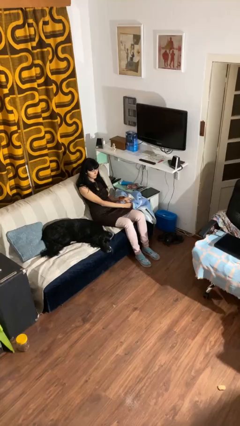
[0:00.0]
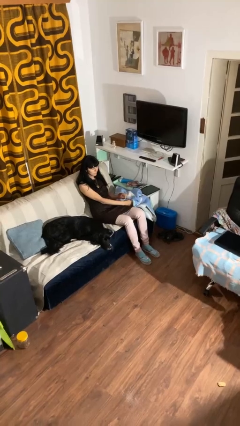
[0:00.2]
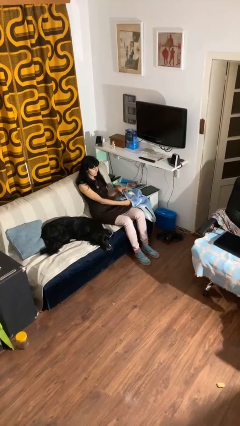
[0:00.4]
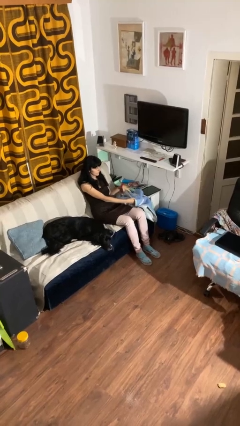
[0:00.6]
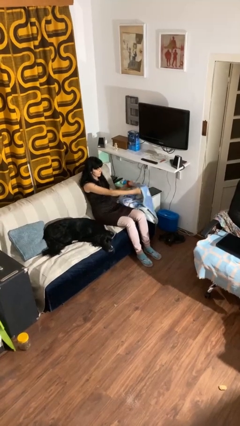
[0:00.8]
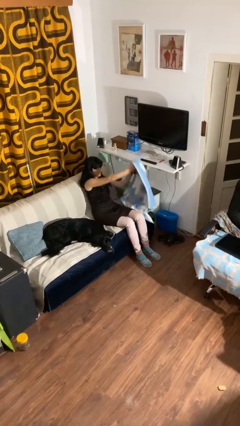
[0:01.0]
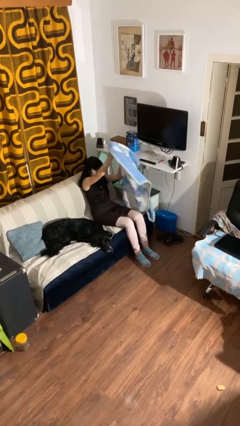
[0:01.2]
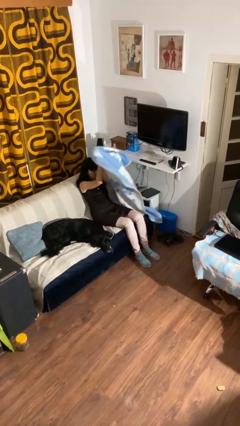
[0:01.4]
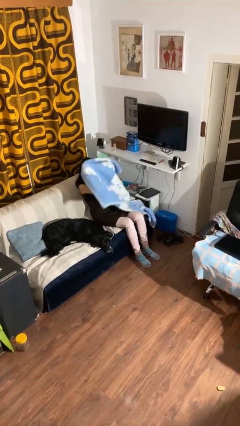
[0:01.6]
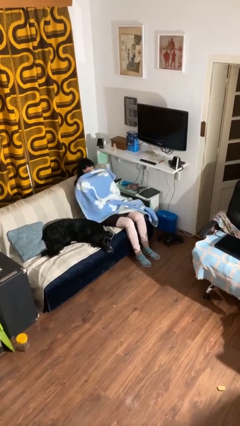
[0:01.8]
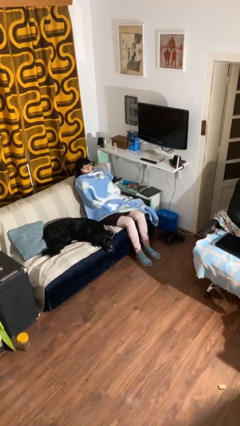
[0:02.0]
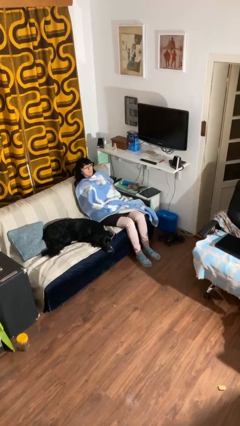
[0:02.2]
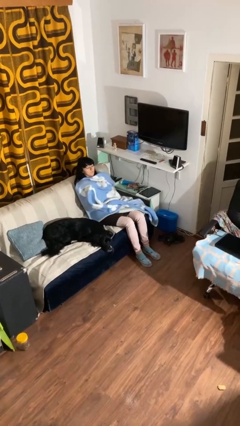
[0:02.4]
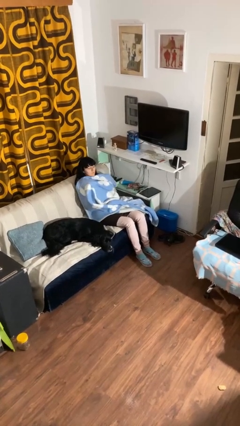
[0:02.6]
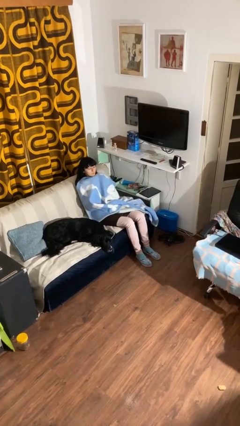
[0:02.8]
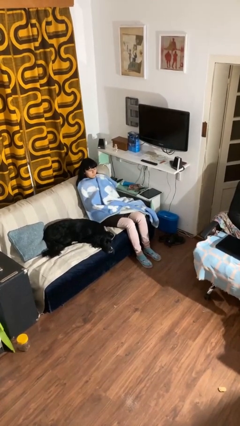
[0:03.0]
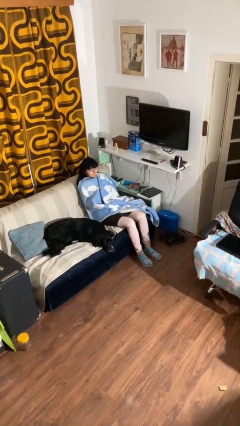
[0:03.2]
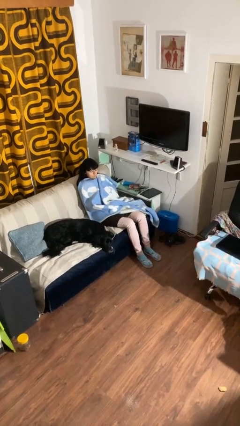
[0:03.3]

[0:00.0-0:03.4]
person covers with blanket

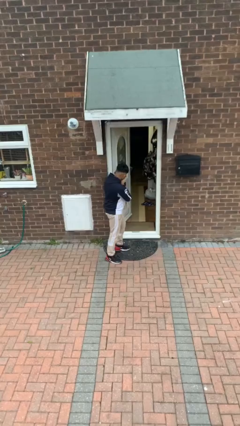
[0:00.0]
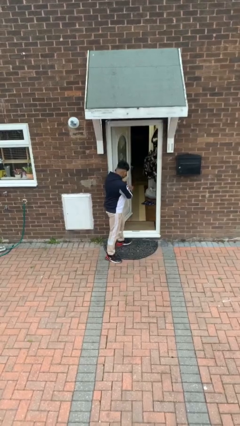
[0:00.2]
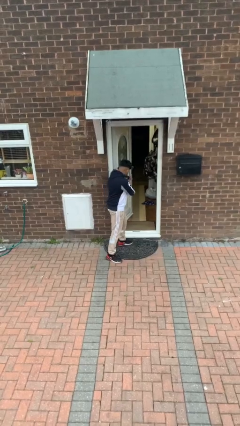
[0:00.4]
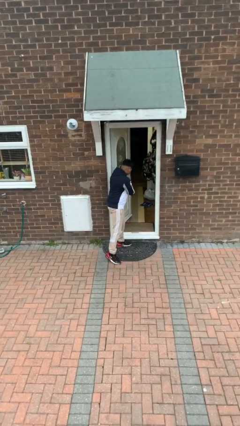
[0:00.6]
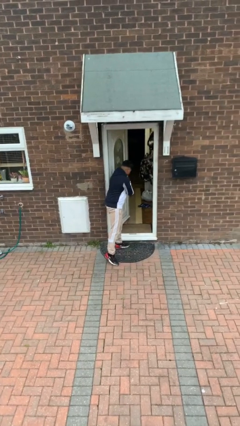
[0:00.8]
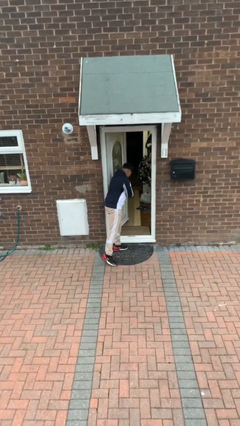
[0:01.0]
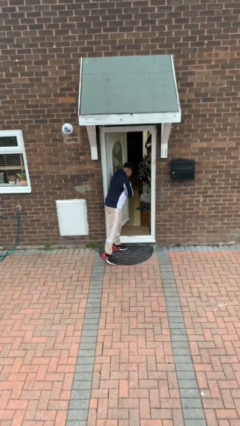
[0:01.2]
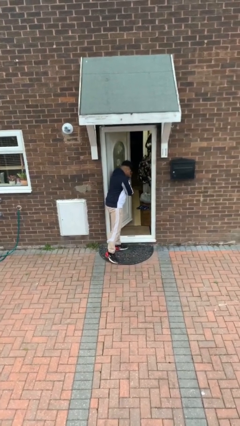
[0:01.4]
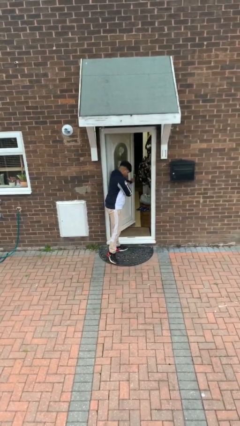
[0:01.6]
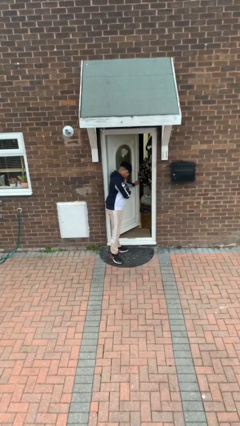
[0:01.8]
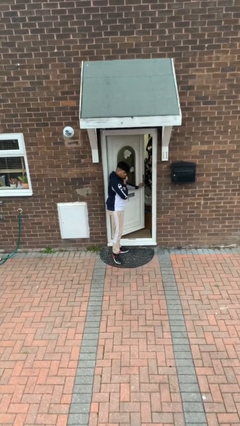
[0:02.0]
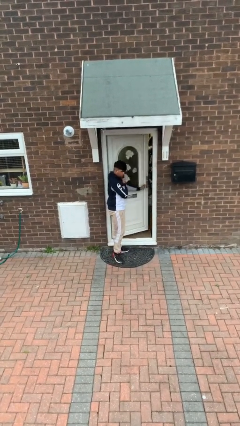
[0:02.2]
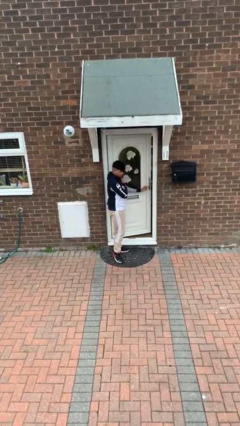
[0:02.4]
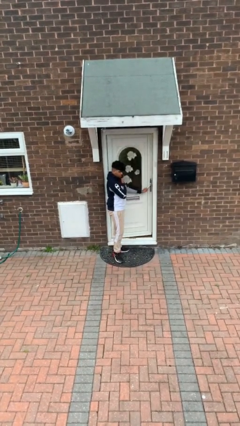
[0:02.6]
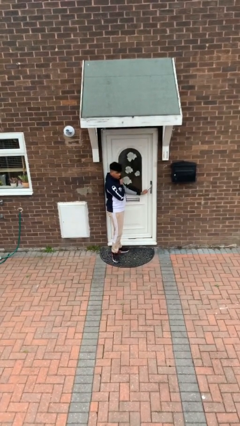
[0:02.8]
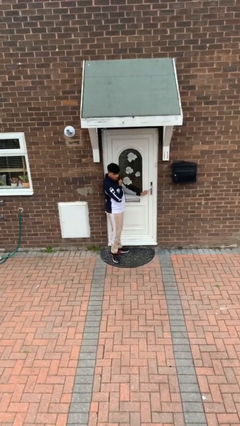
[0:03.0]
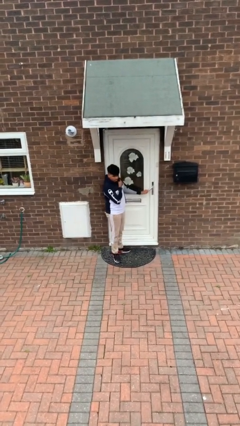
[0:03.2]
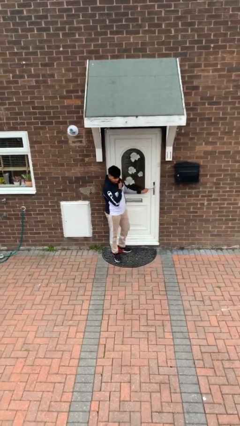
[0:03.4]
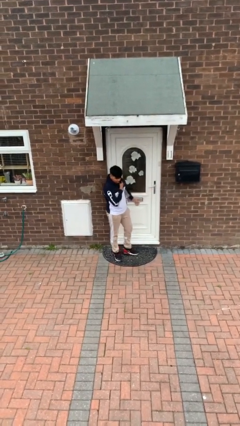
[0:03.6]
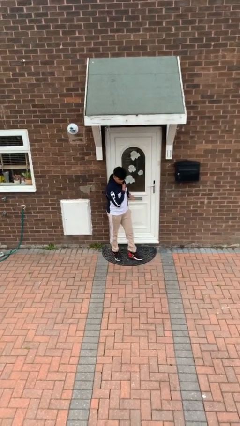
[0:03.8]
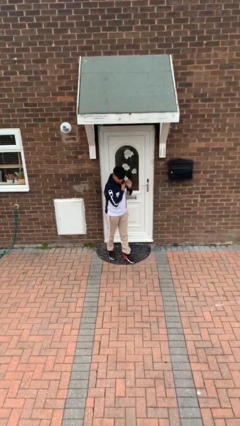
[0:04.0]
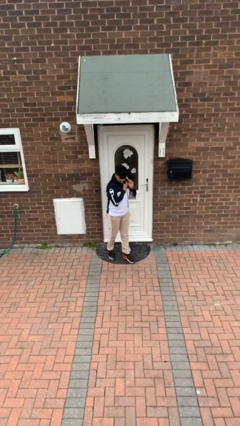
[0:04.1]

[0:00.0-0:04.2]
person closes facility door

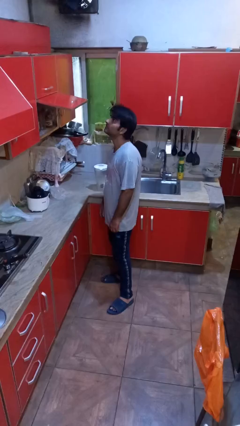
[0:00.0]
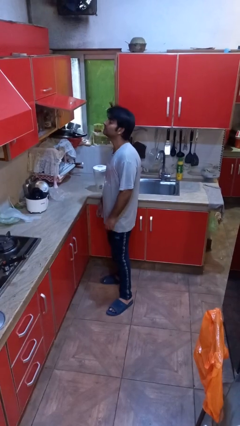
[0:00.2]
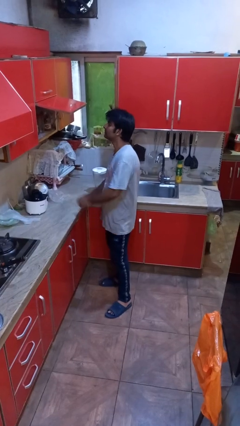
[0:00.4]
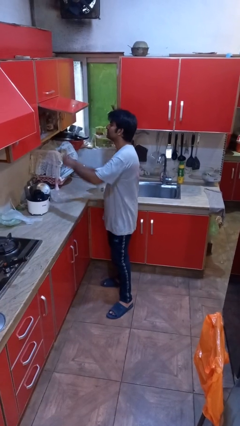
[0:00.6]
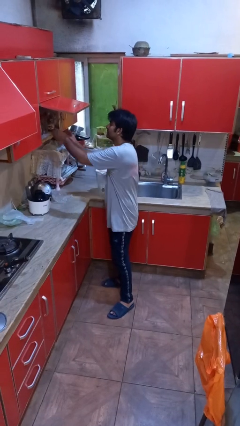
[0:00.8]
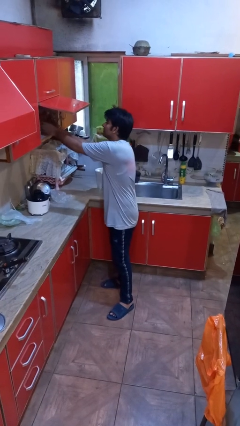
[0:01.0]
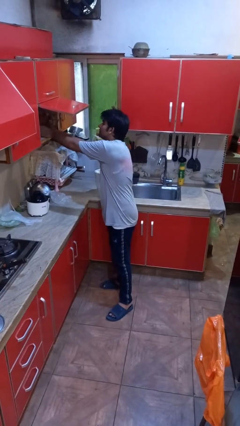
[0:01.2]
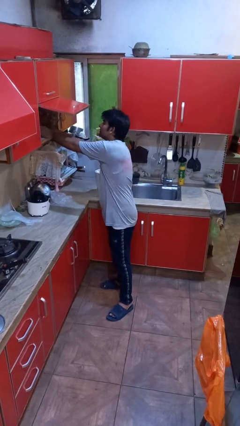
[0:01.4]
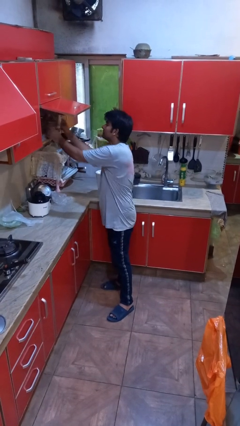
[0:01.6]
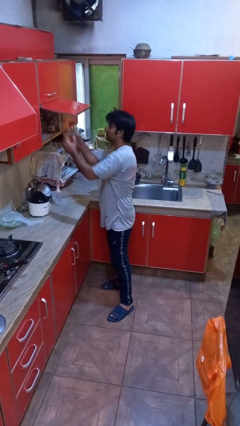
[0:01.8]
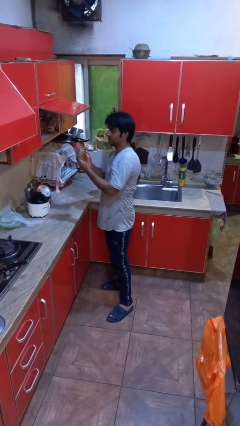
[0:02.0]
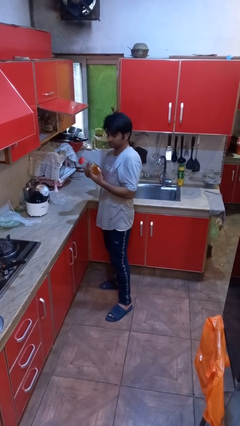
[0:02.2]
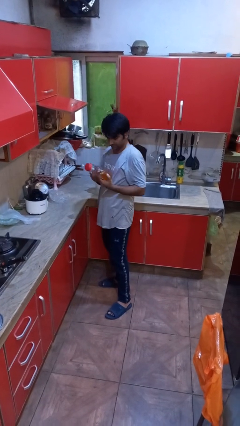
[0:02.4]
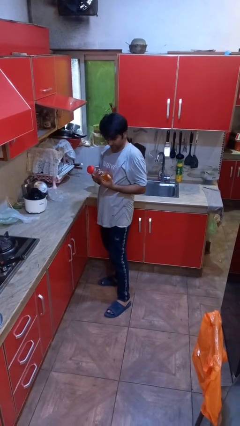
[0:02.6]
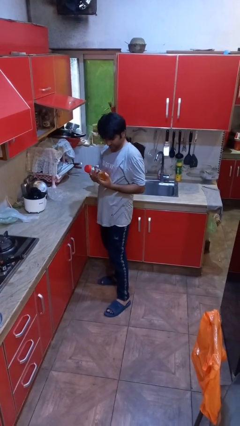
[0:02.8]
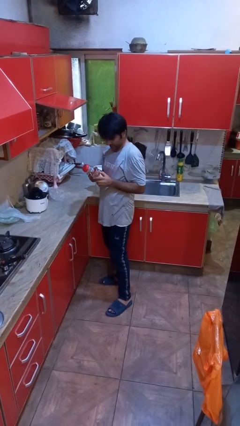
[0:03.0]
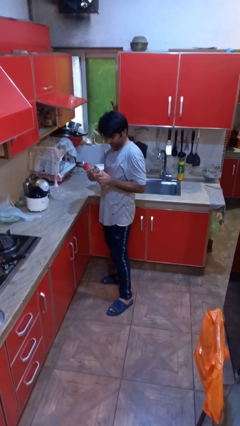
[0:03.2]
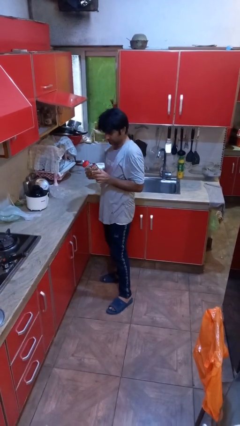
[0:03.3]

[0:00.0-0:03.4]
person picks up object from cabinet

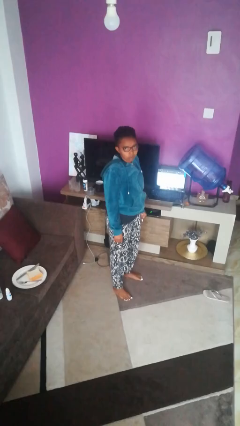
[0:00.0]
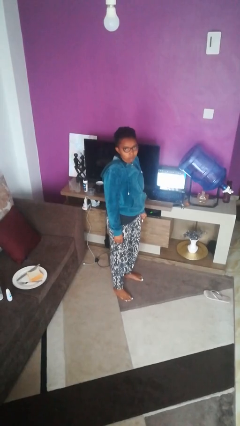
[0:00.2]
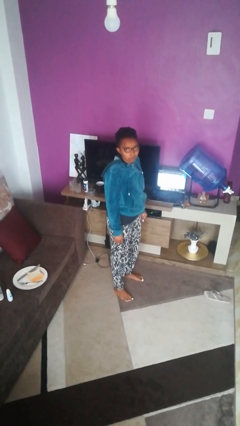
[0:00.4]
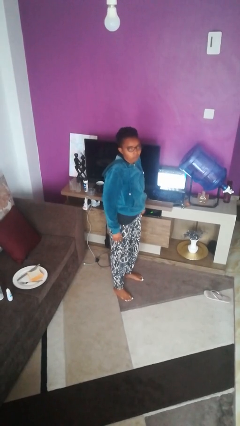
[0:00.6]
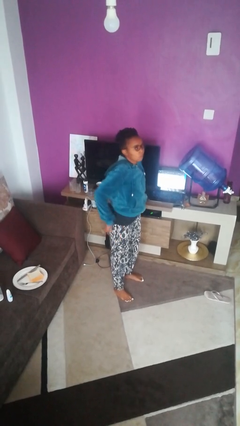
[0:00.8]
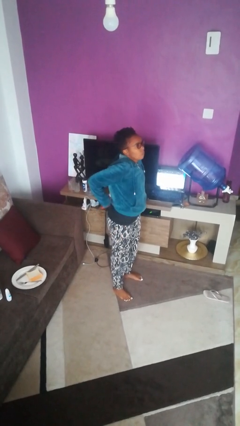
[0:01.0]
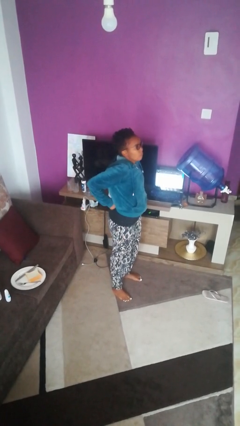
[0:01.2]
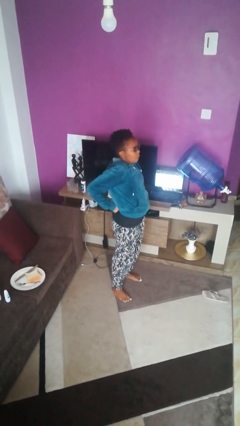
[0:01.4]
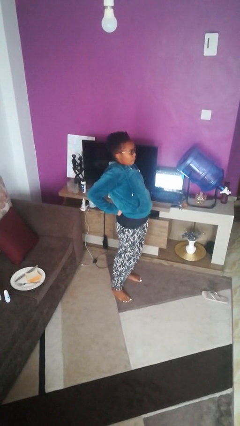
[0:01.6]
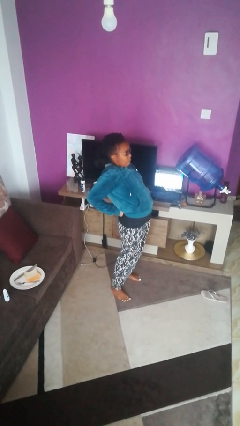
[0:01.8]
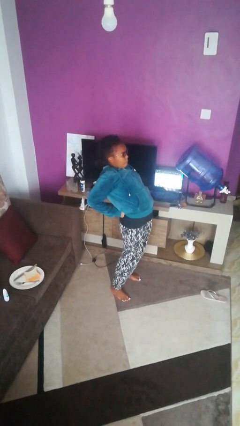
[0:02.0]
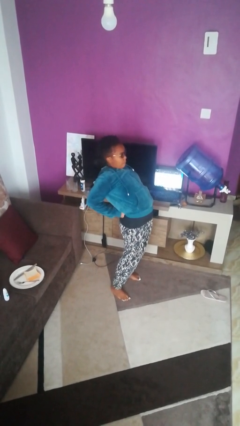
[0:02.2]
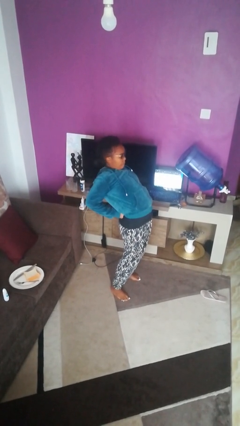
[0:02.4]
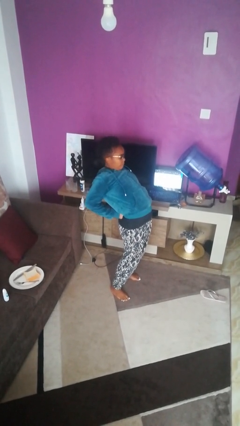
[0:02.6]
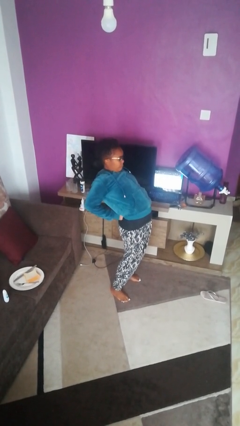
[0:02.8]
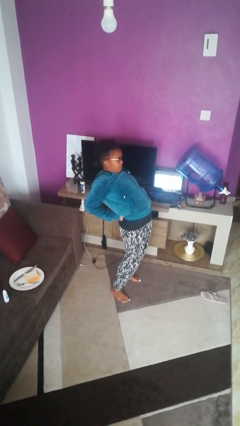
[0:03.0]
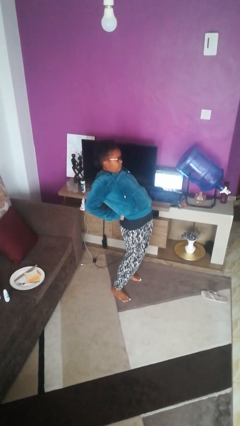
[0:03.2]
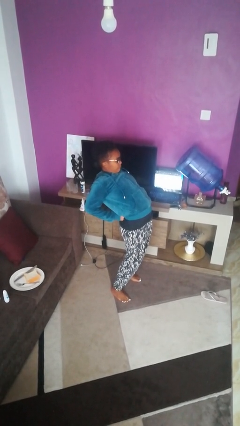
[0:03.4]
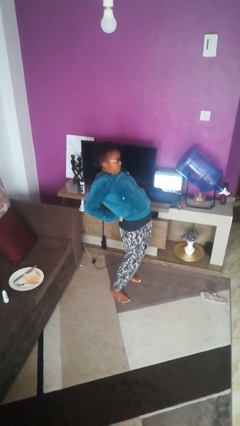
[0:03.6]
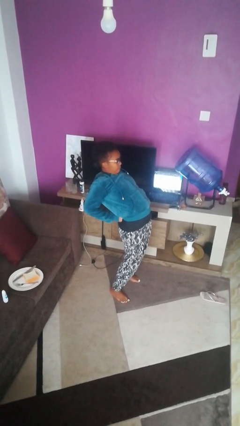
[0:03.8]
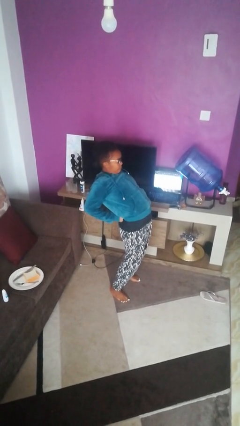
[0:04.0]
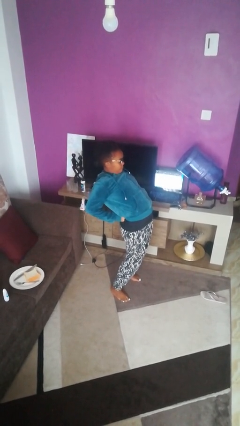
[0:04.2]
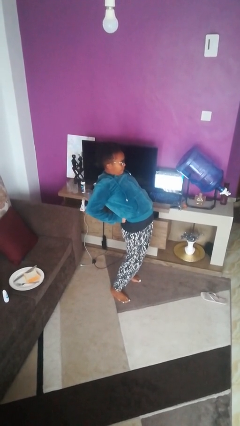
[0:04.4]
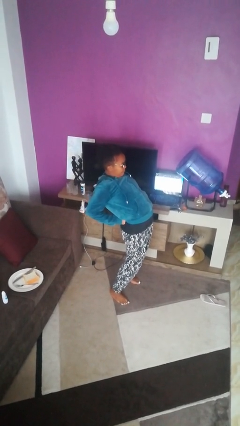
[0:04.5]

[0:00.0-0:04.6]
person stretches back

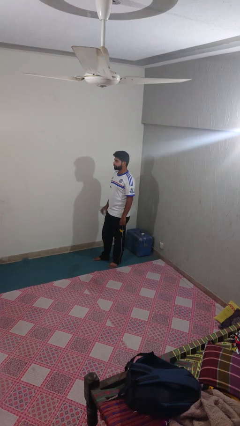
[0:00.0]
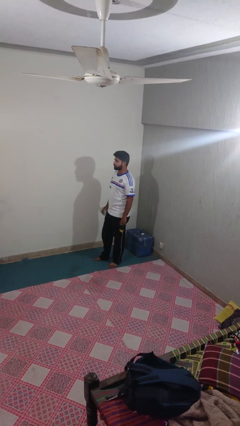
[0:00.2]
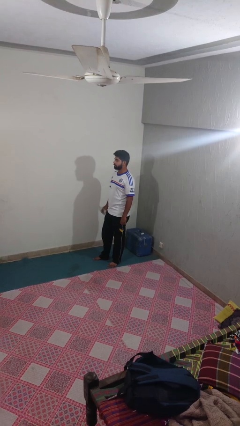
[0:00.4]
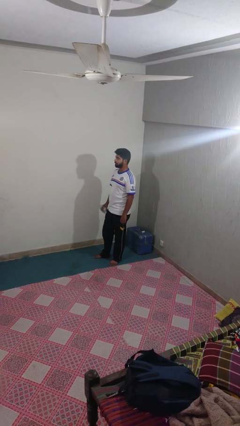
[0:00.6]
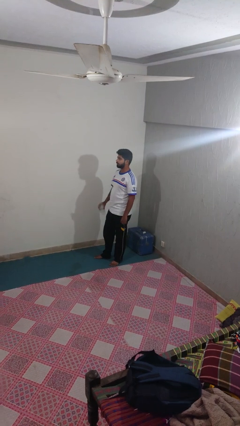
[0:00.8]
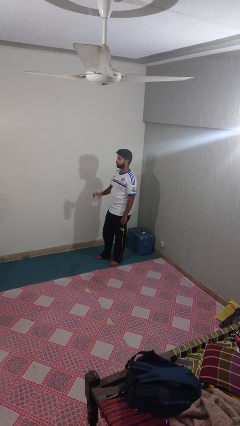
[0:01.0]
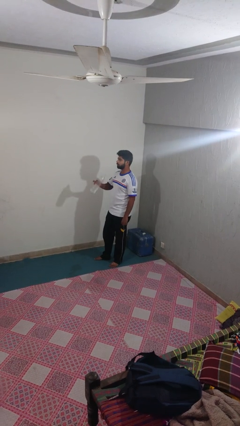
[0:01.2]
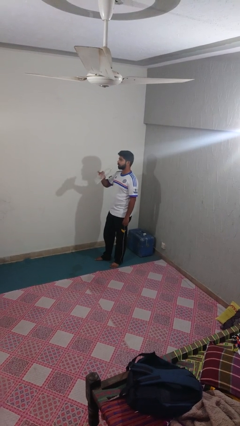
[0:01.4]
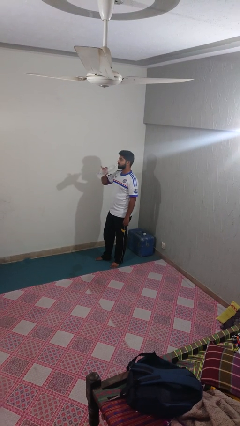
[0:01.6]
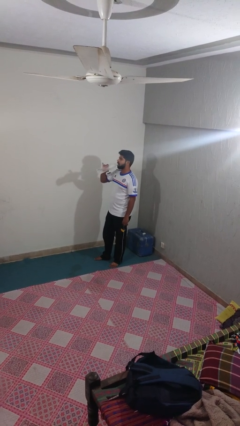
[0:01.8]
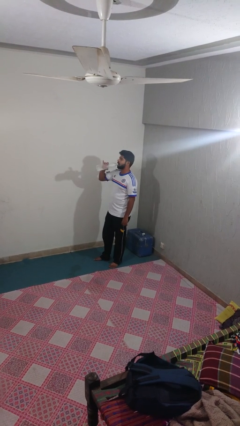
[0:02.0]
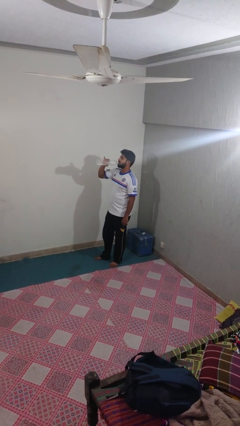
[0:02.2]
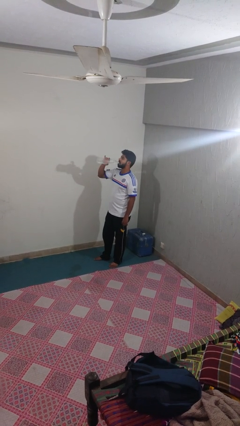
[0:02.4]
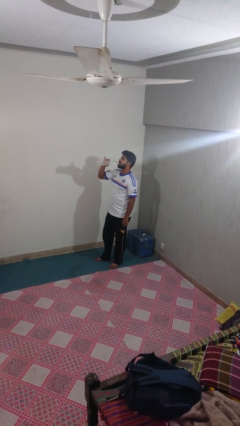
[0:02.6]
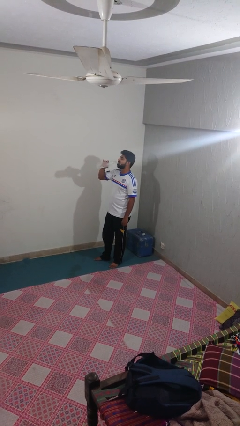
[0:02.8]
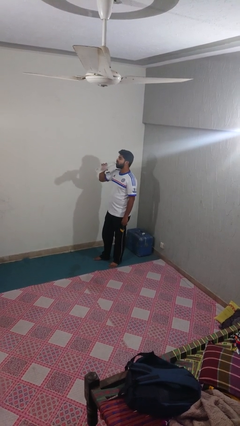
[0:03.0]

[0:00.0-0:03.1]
person drinks from bottle
